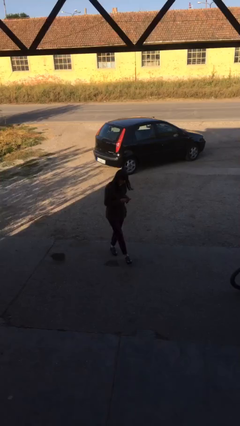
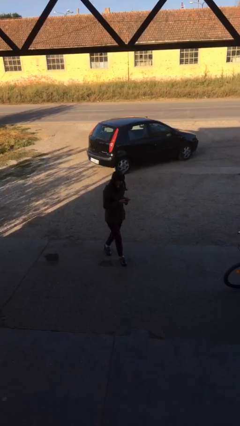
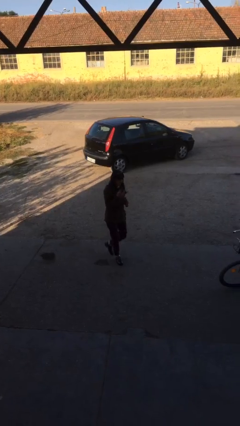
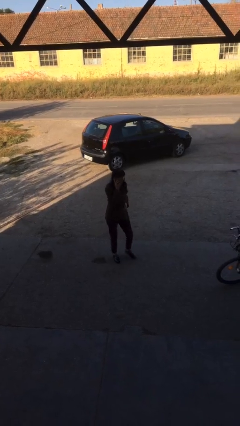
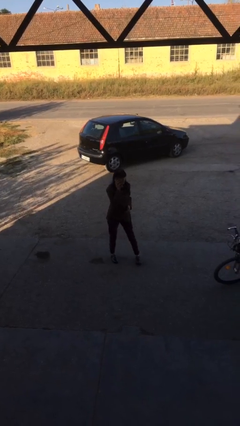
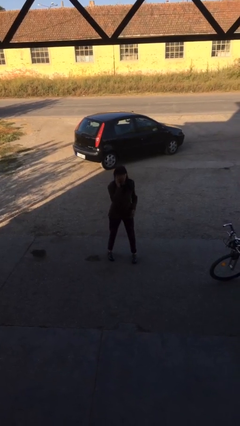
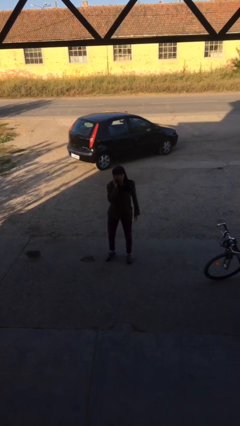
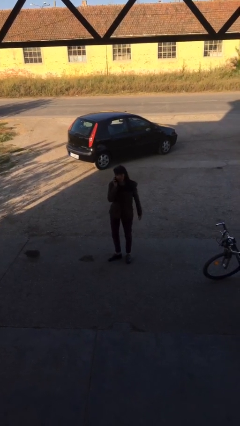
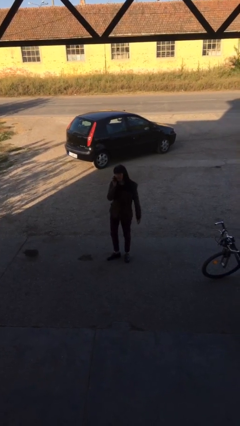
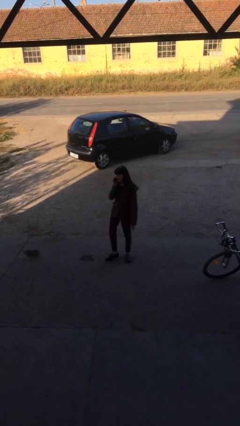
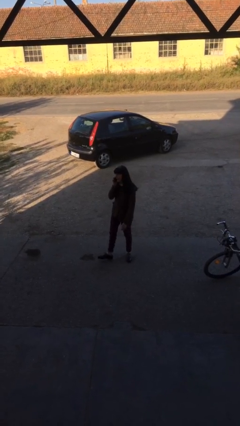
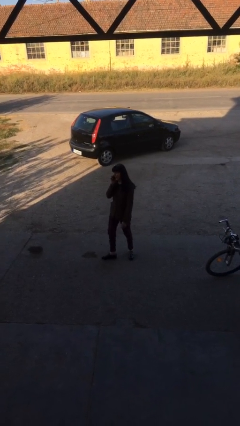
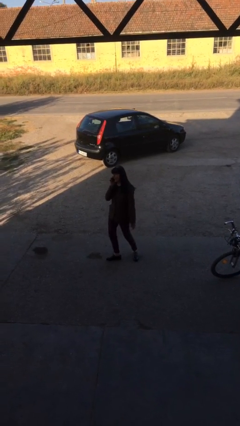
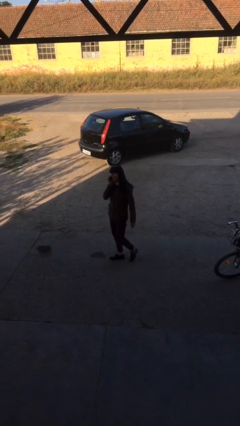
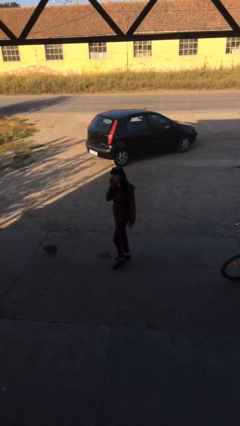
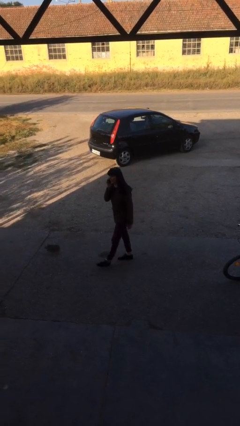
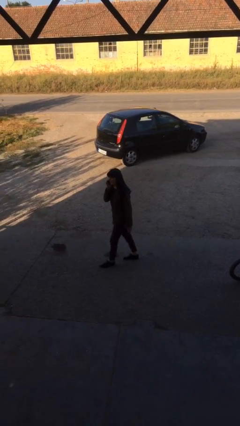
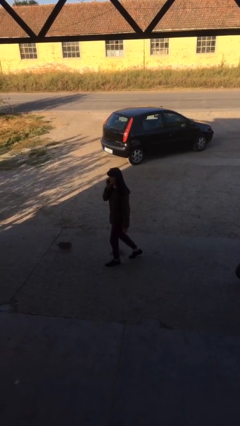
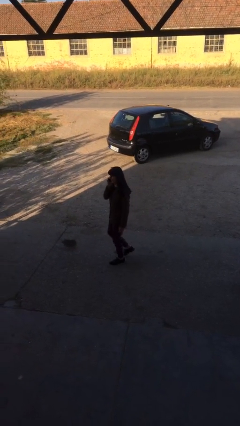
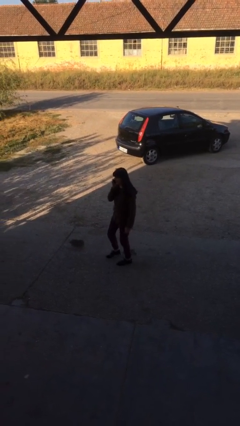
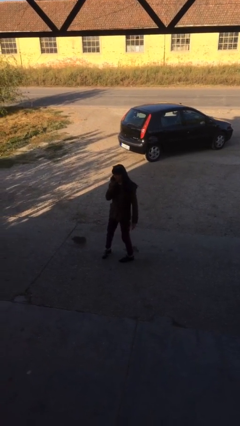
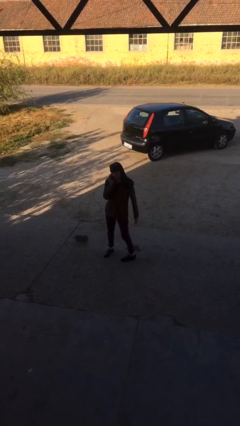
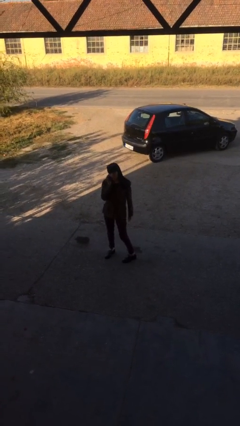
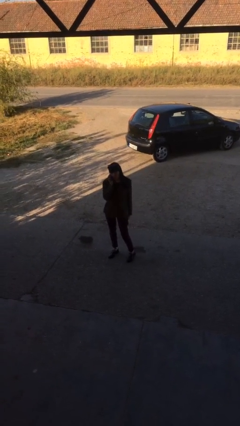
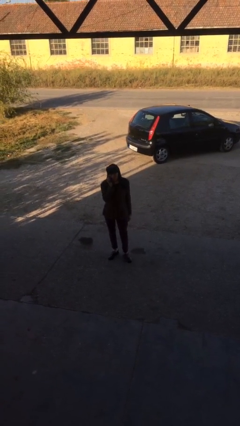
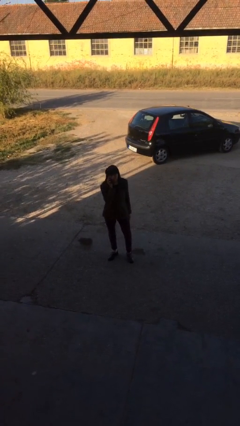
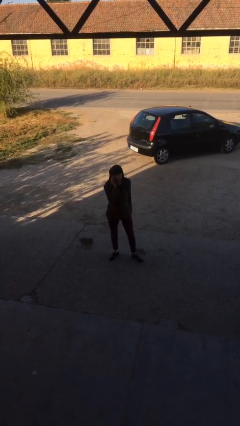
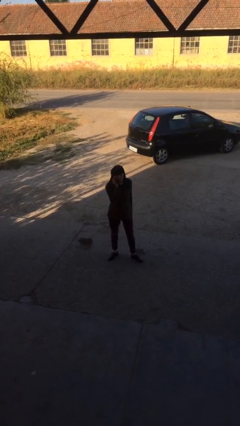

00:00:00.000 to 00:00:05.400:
person talks on phone

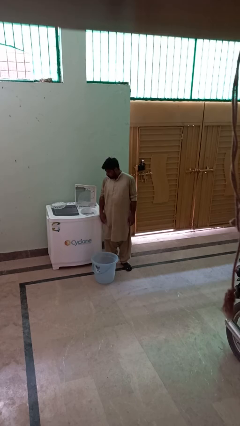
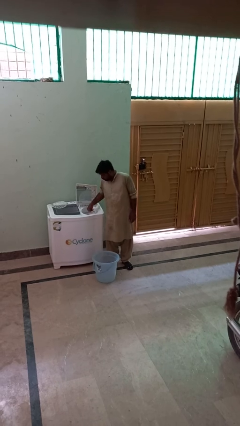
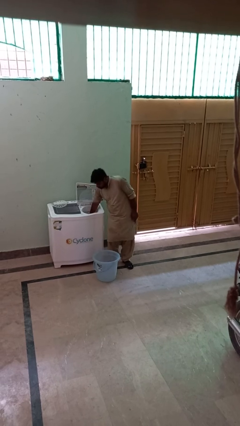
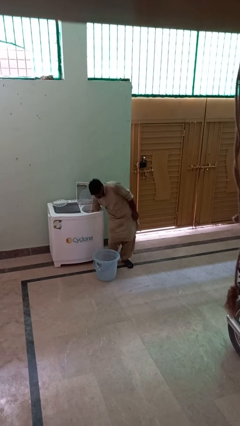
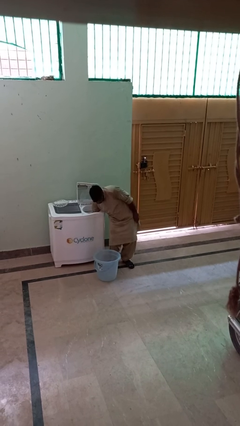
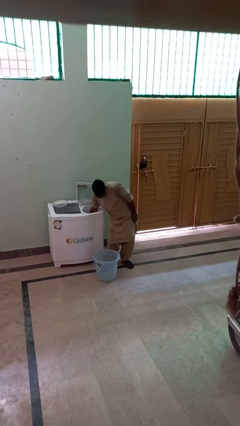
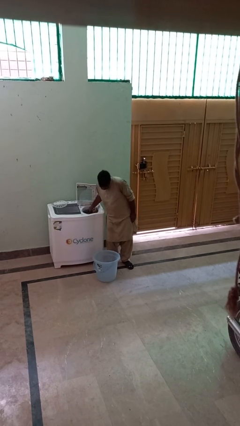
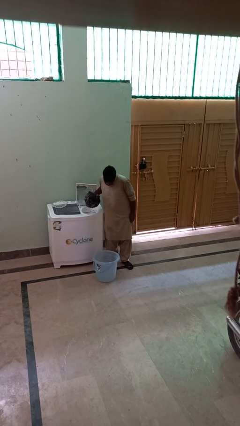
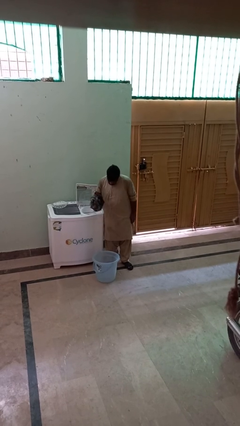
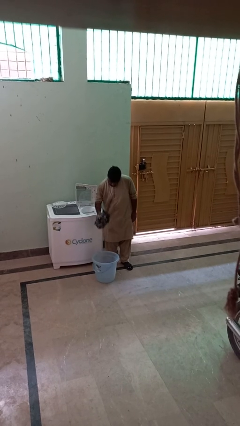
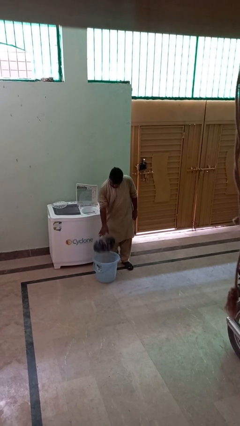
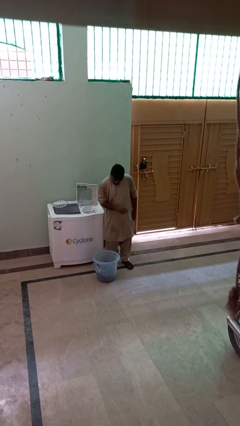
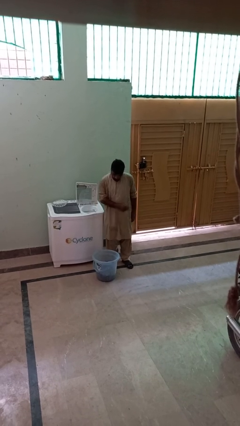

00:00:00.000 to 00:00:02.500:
person unloads dryer

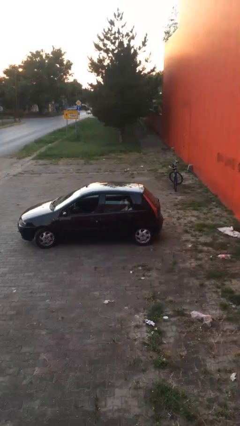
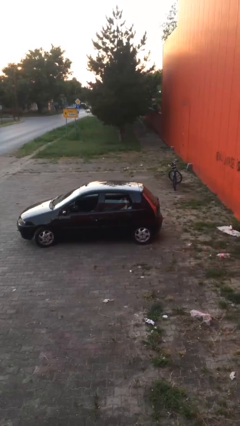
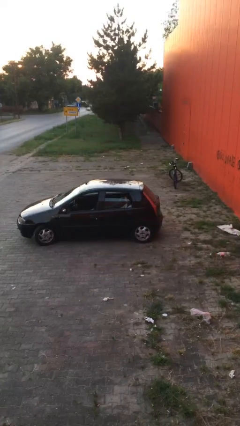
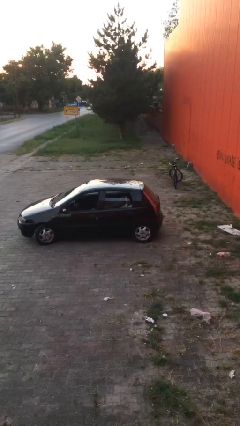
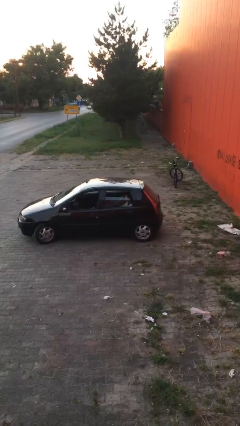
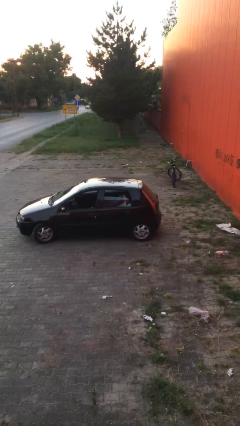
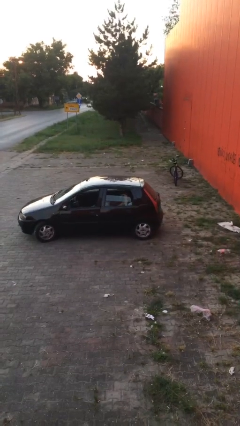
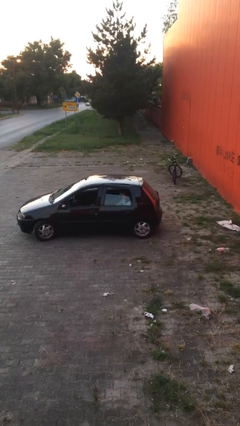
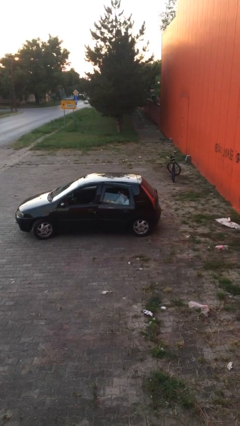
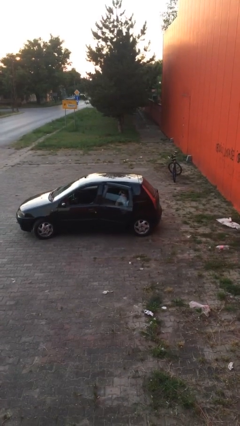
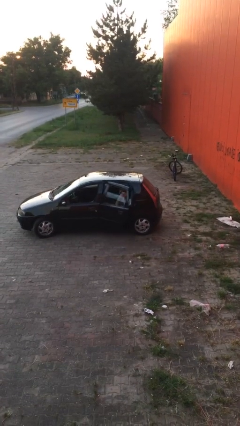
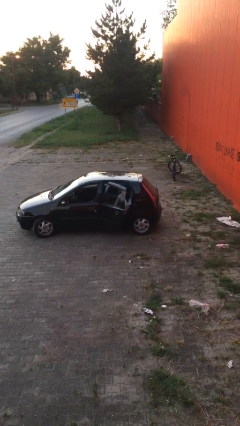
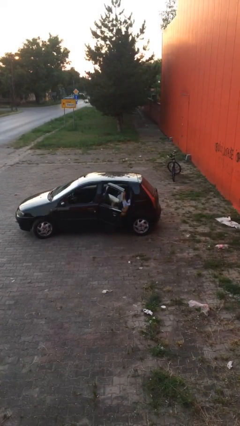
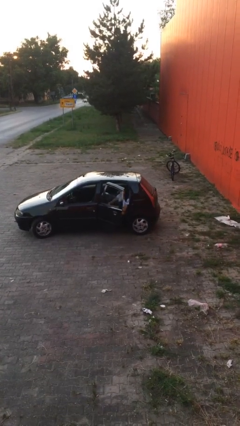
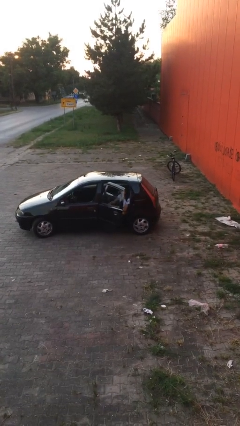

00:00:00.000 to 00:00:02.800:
person opens car door

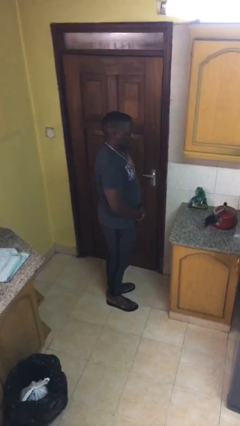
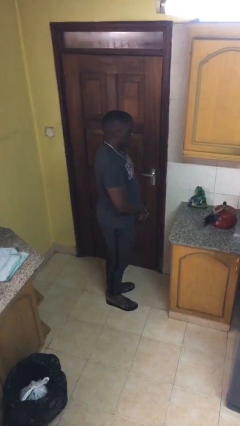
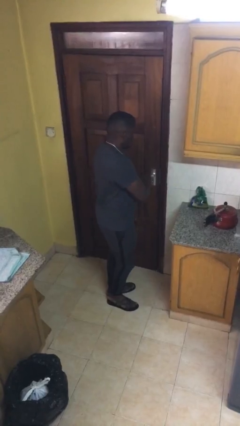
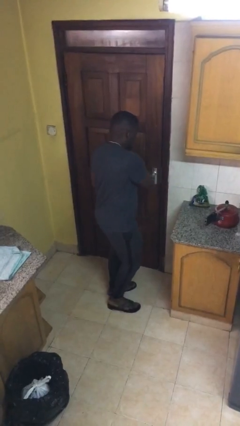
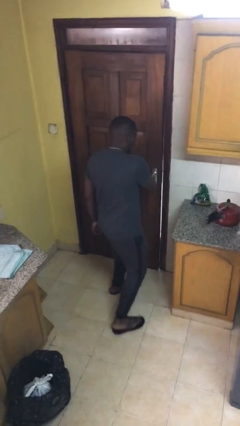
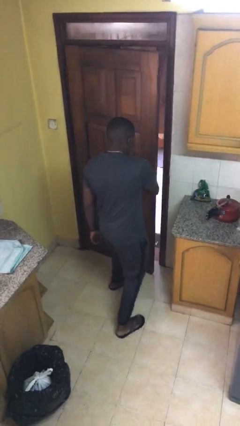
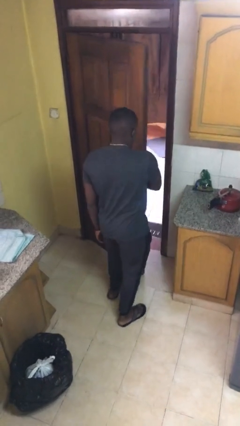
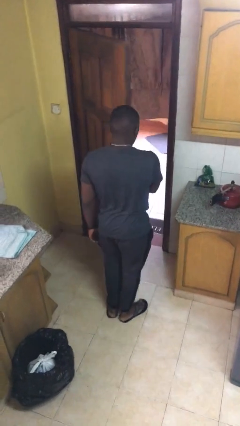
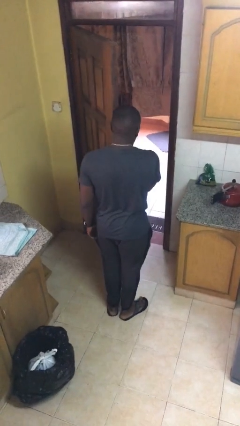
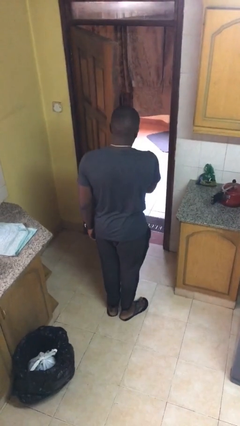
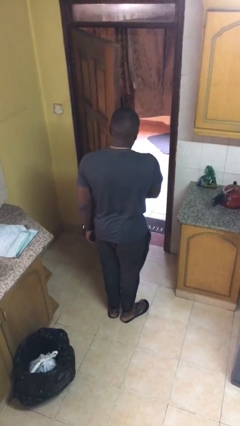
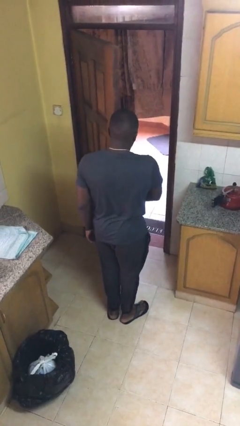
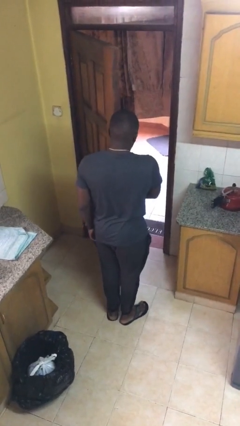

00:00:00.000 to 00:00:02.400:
person opens facility door

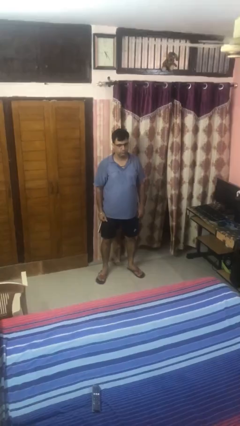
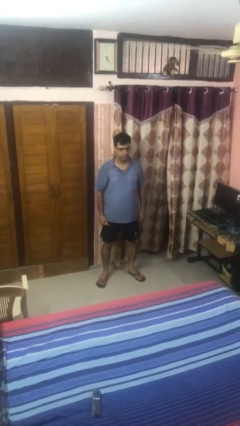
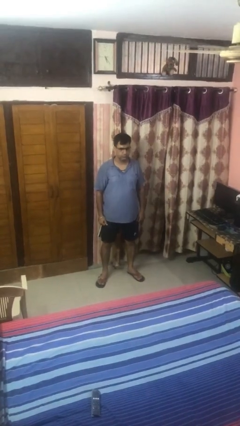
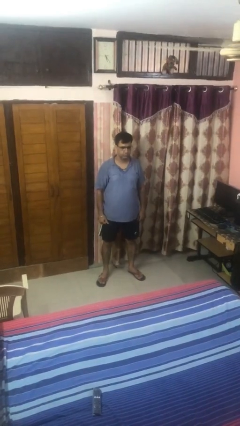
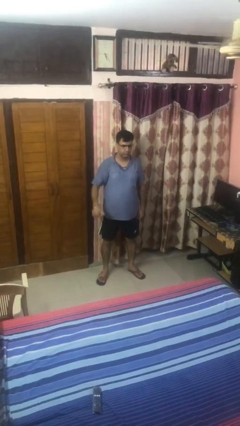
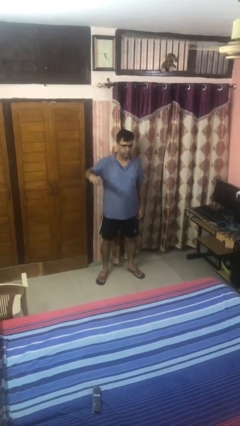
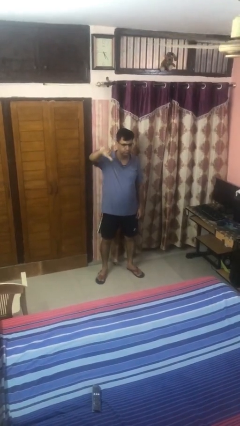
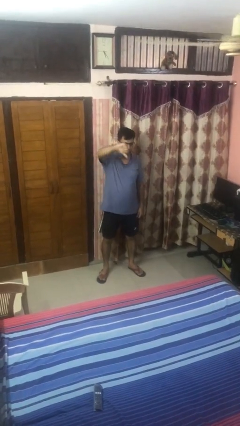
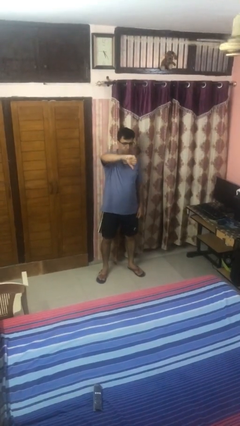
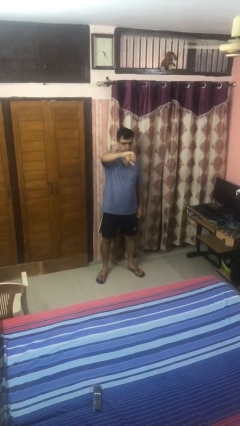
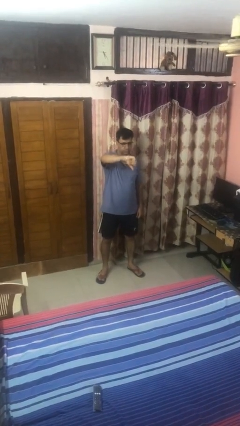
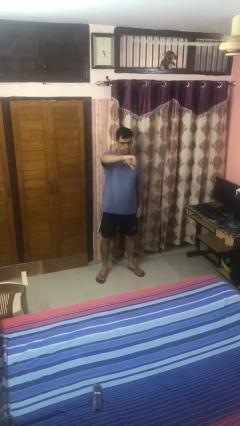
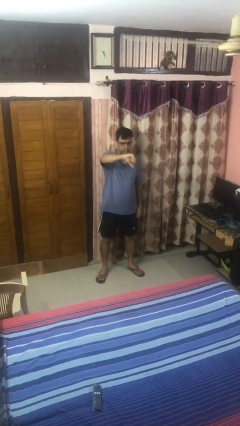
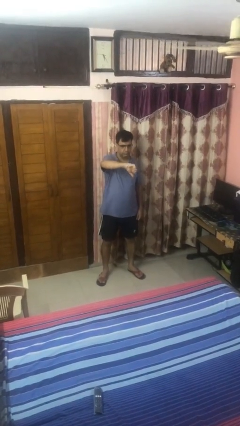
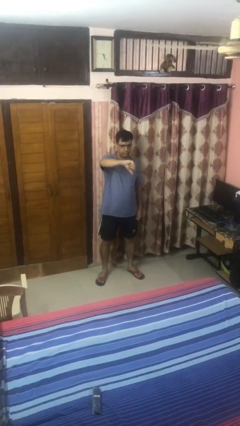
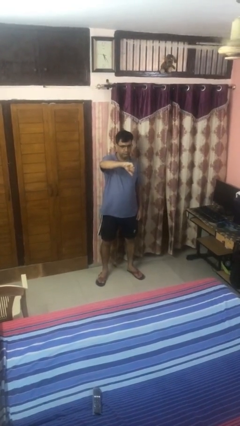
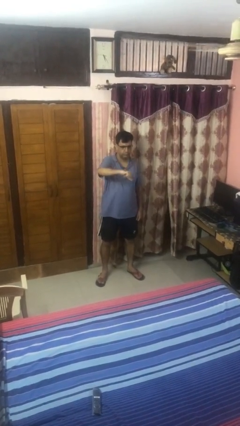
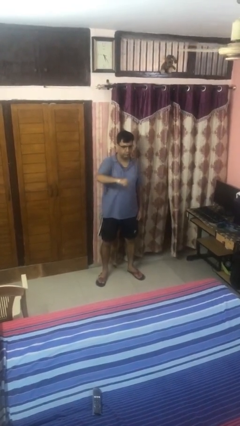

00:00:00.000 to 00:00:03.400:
person gestures thumbs down

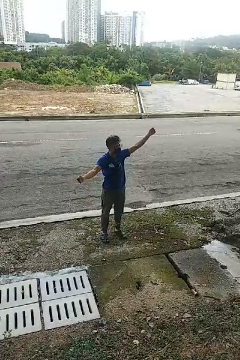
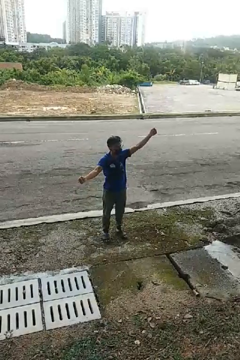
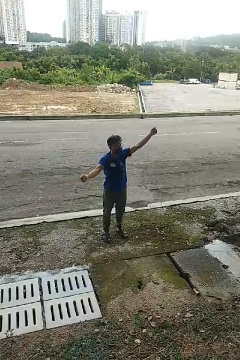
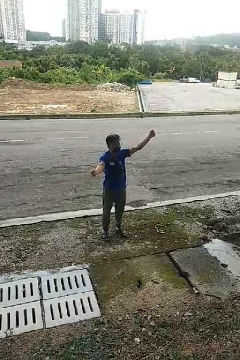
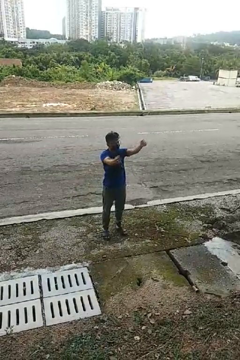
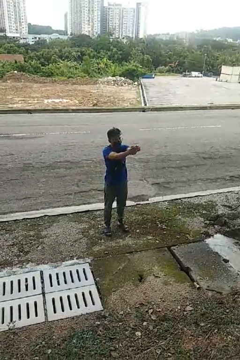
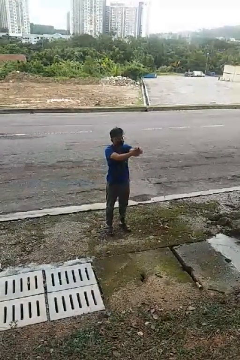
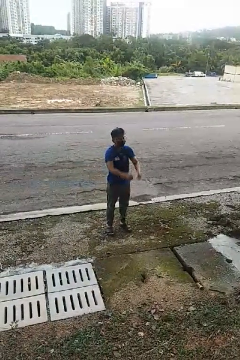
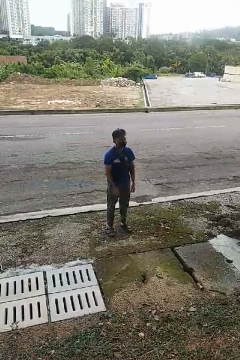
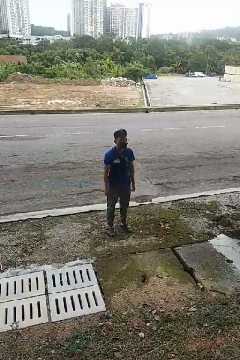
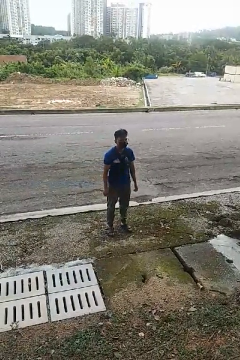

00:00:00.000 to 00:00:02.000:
person gestures zoom out
